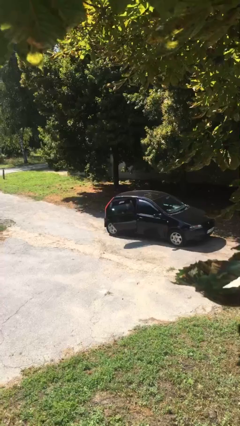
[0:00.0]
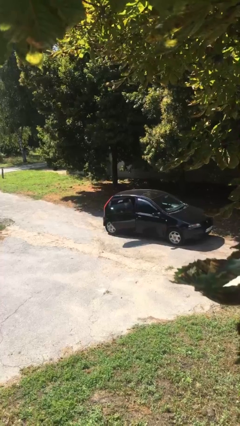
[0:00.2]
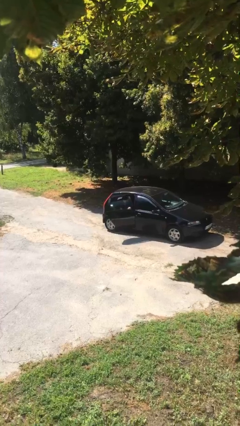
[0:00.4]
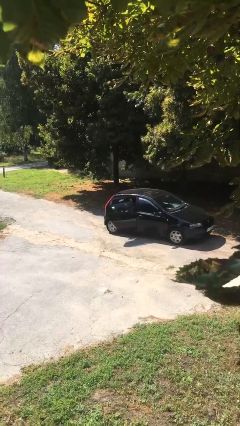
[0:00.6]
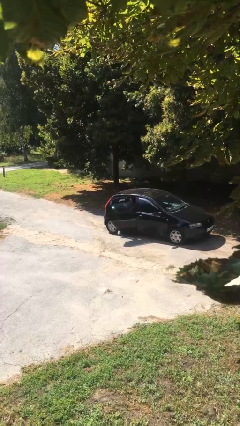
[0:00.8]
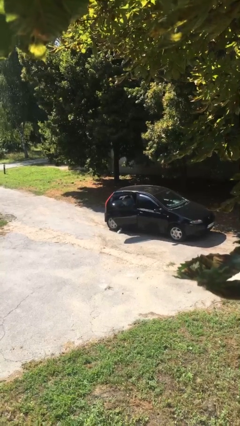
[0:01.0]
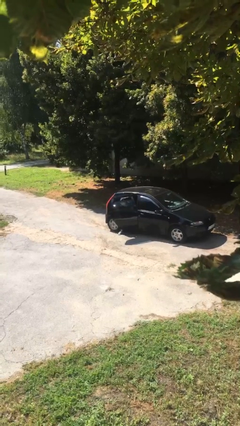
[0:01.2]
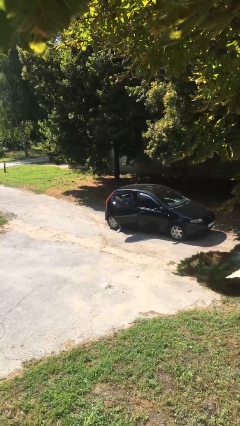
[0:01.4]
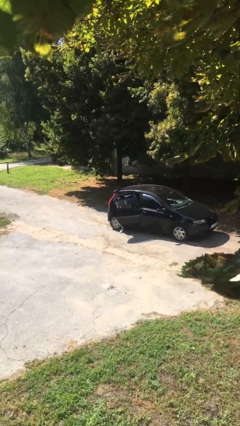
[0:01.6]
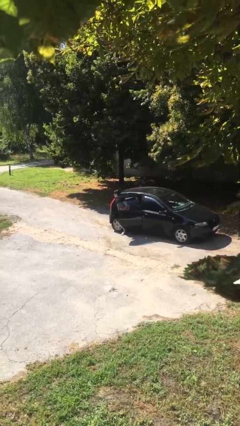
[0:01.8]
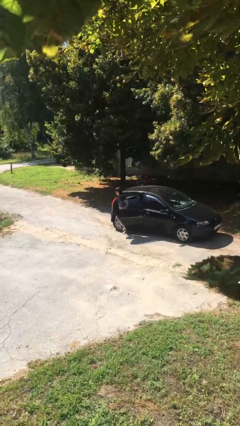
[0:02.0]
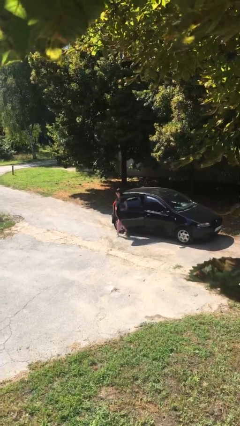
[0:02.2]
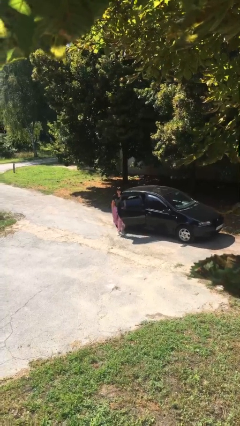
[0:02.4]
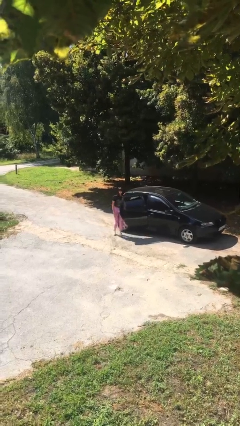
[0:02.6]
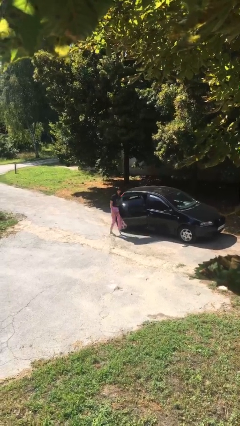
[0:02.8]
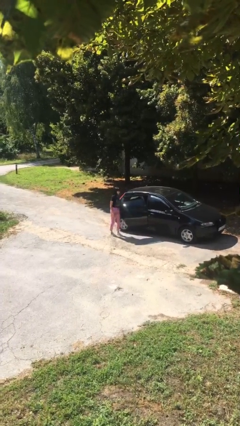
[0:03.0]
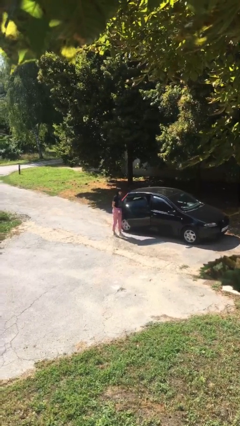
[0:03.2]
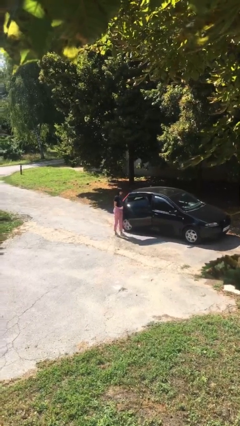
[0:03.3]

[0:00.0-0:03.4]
person exits car

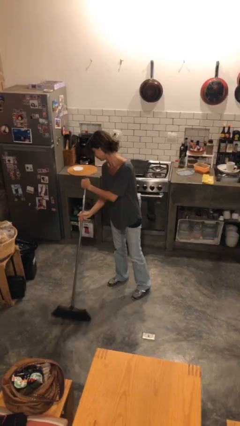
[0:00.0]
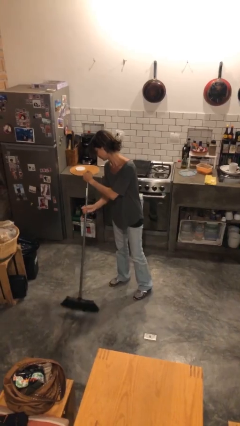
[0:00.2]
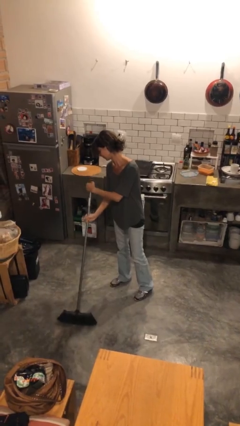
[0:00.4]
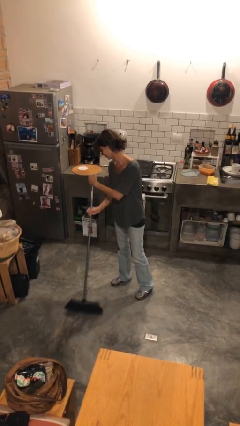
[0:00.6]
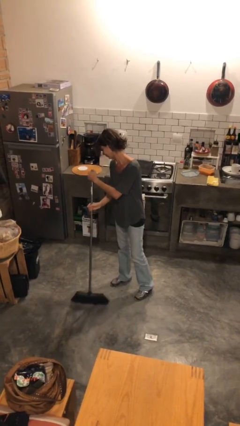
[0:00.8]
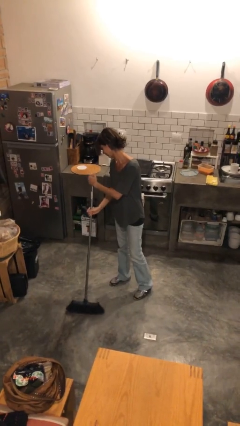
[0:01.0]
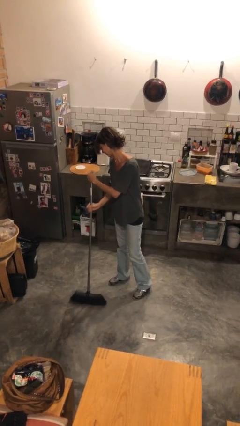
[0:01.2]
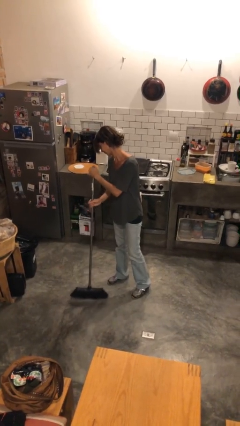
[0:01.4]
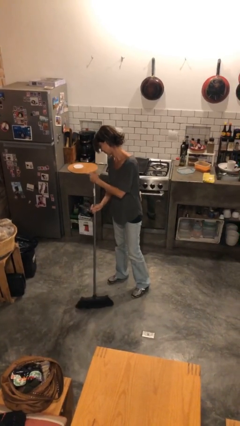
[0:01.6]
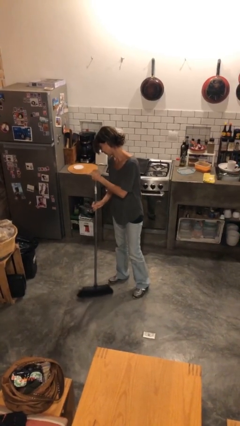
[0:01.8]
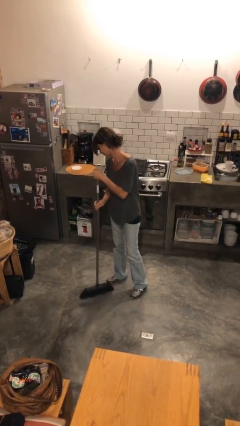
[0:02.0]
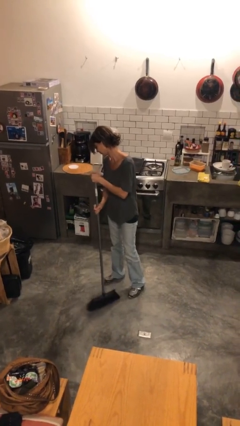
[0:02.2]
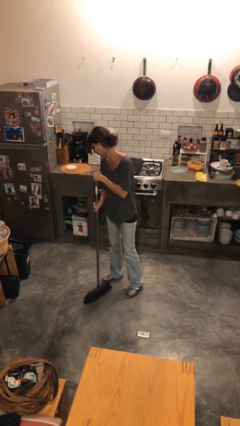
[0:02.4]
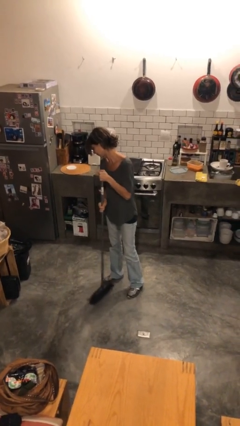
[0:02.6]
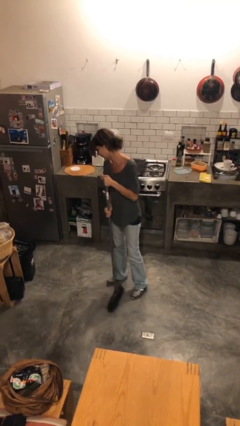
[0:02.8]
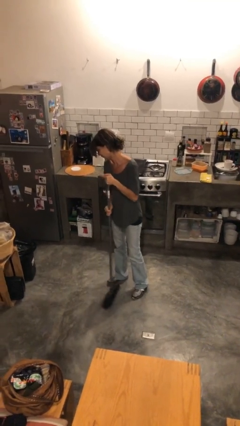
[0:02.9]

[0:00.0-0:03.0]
person sweeps floor

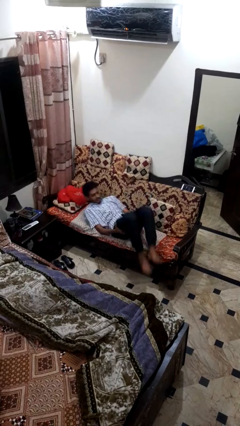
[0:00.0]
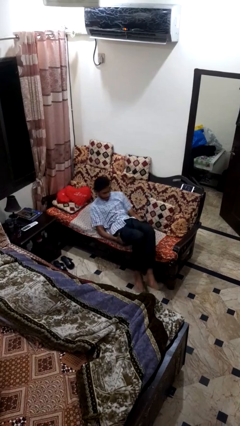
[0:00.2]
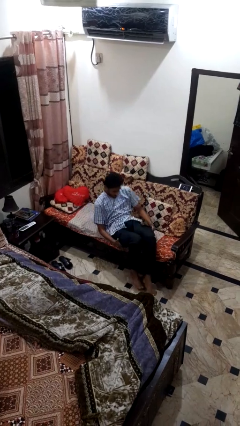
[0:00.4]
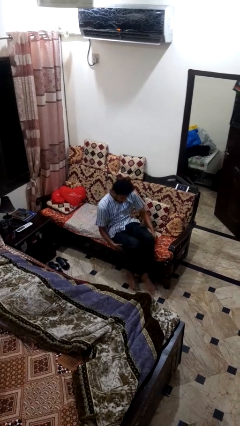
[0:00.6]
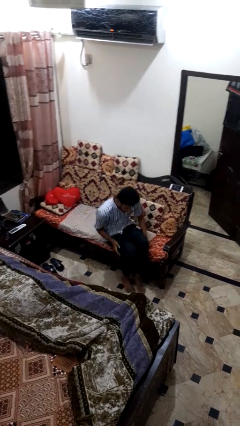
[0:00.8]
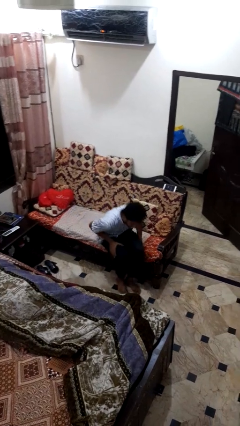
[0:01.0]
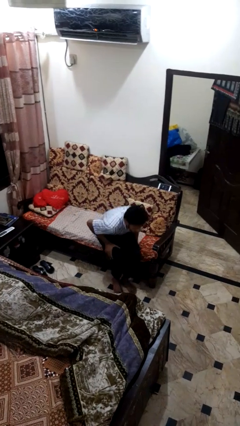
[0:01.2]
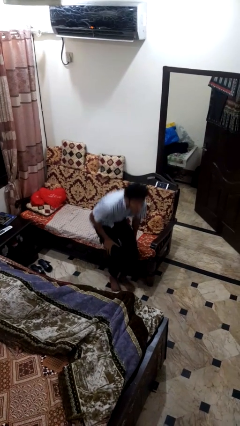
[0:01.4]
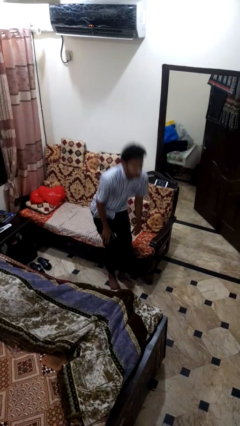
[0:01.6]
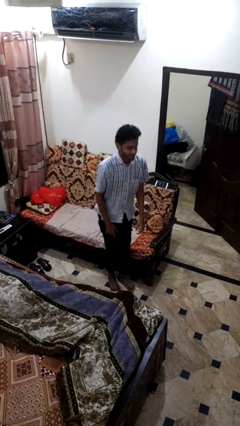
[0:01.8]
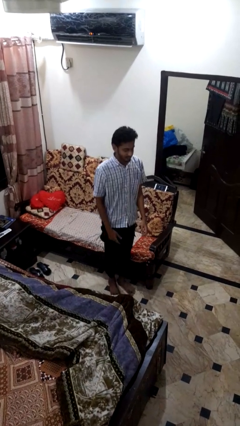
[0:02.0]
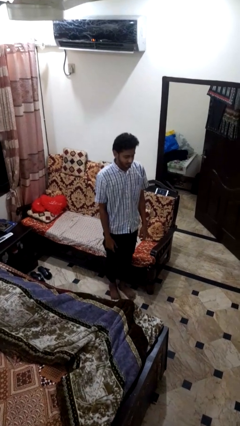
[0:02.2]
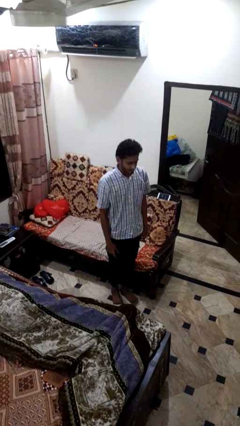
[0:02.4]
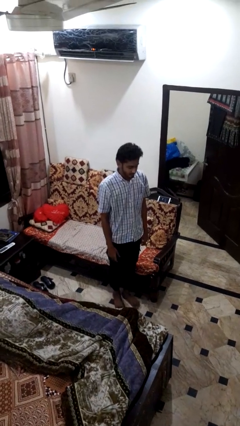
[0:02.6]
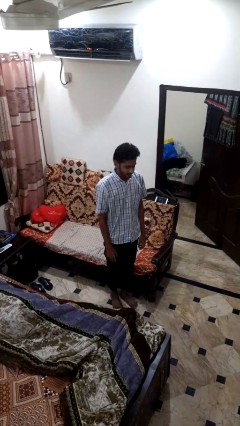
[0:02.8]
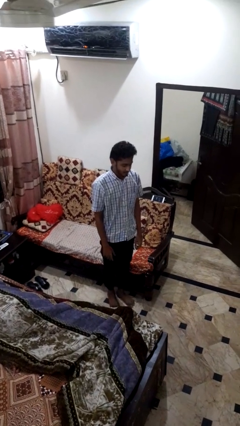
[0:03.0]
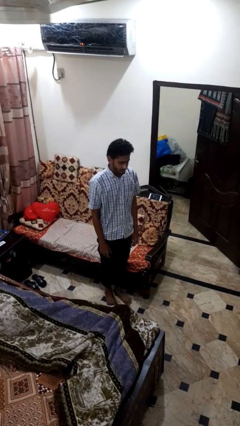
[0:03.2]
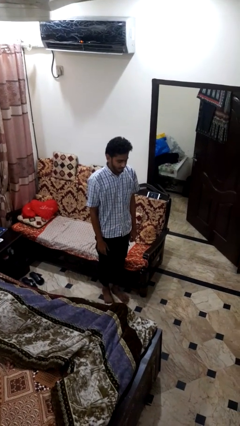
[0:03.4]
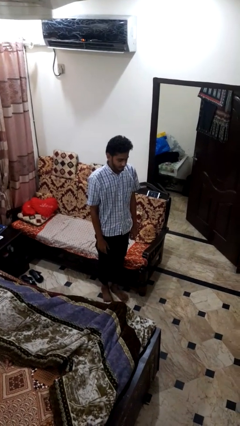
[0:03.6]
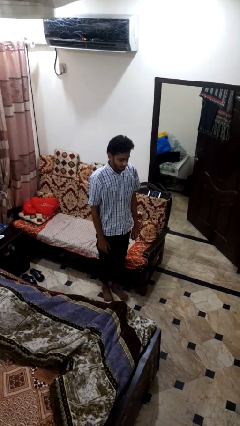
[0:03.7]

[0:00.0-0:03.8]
person stands up

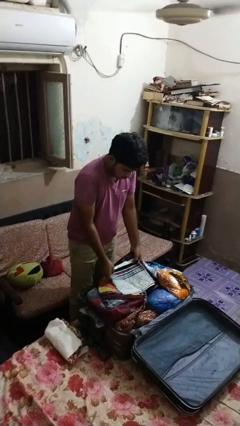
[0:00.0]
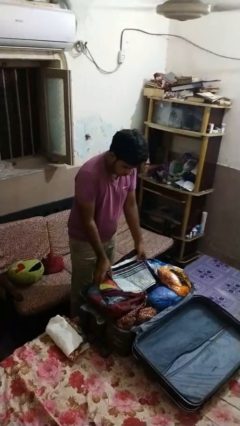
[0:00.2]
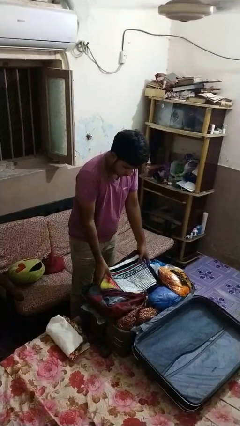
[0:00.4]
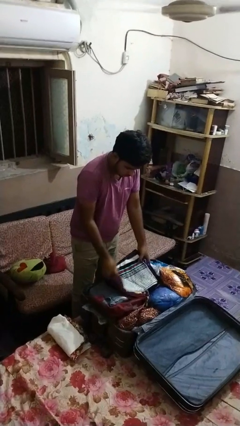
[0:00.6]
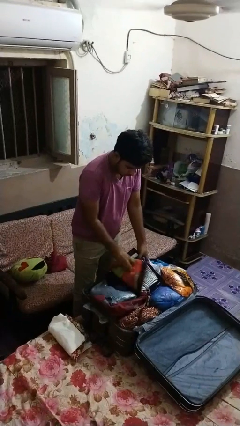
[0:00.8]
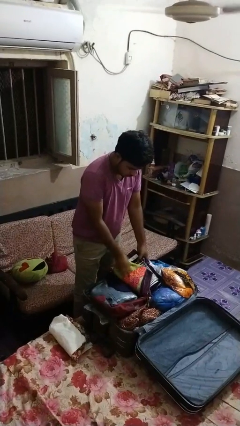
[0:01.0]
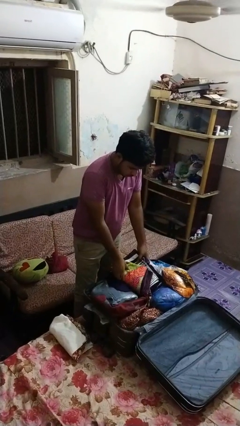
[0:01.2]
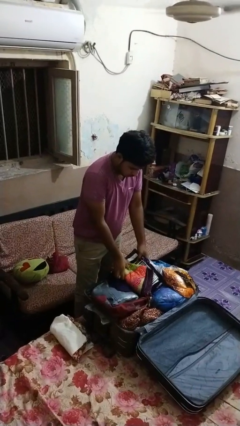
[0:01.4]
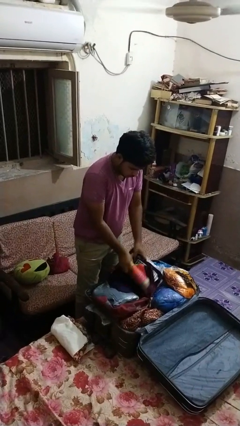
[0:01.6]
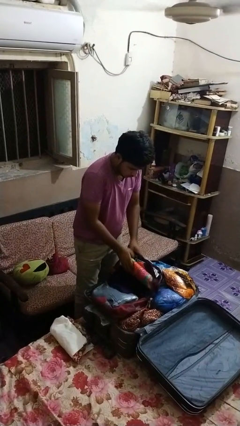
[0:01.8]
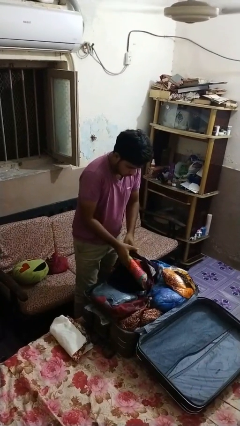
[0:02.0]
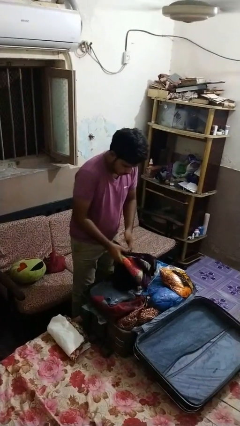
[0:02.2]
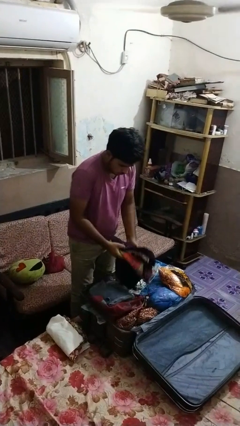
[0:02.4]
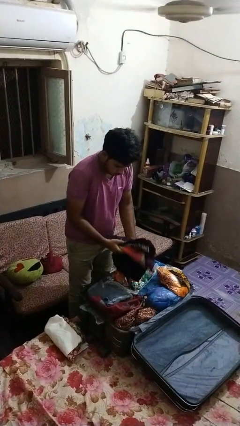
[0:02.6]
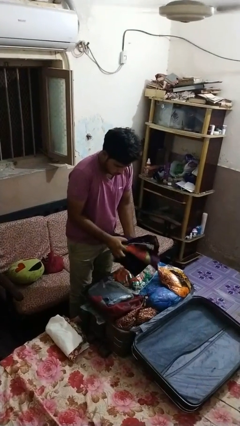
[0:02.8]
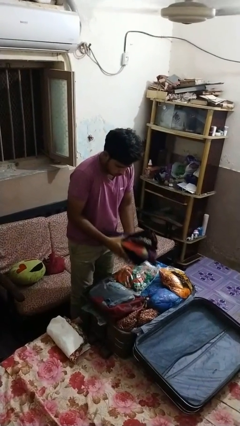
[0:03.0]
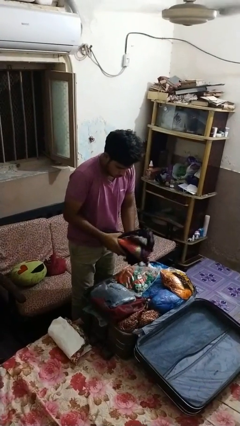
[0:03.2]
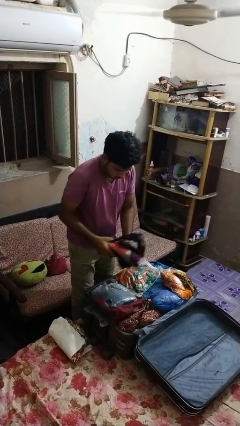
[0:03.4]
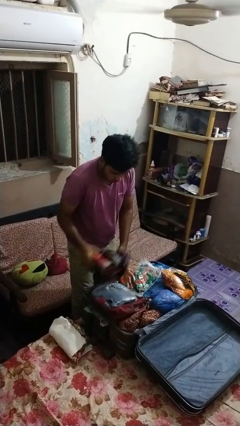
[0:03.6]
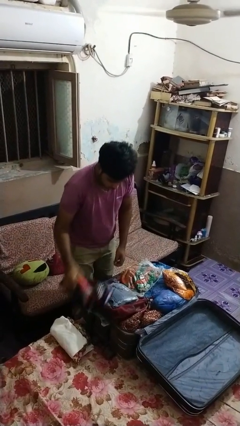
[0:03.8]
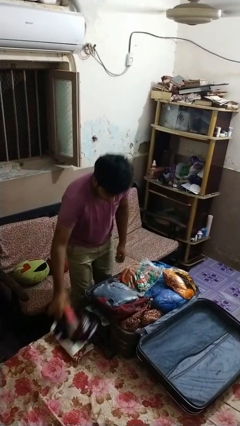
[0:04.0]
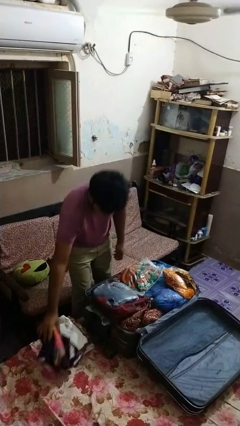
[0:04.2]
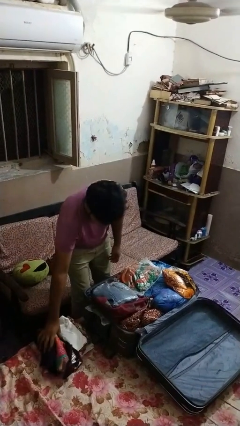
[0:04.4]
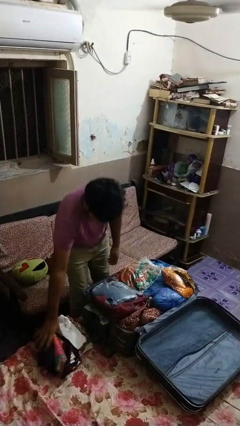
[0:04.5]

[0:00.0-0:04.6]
person unloads clothes from suitcase

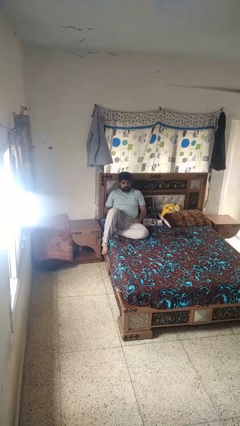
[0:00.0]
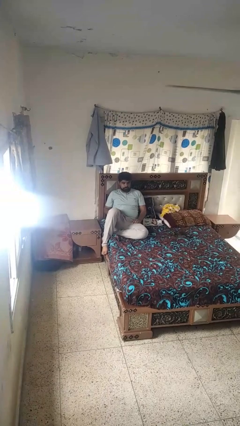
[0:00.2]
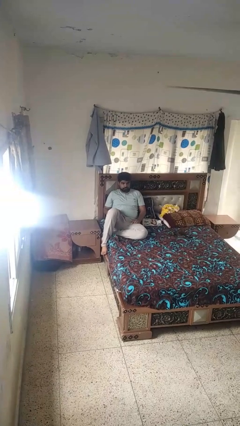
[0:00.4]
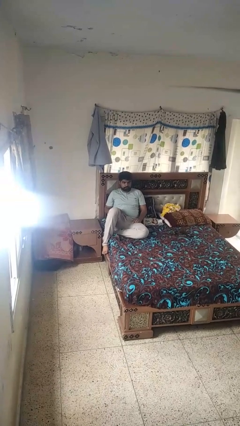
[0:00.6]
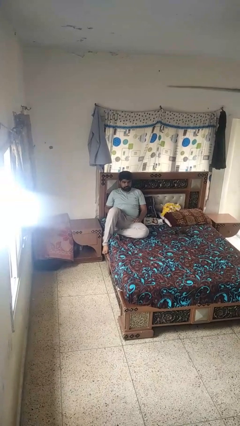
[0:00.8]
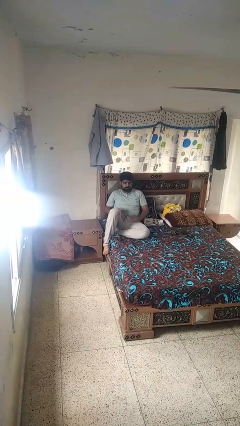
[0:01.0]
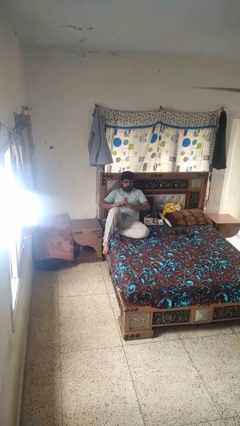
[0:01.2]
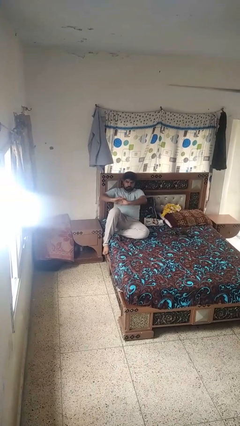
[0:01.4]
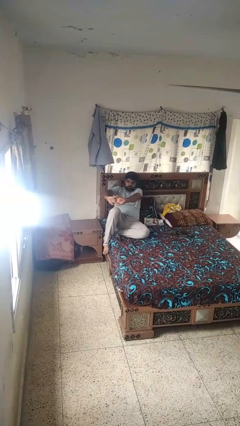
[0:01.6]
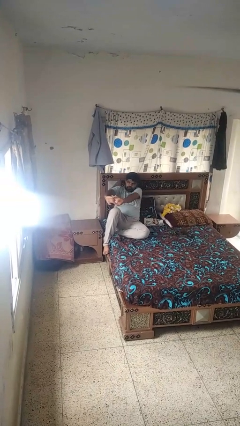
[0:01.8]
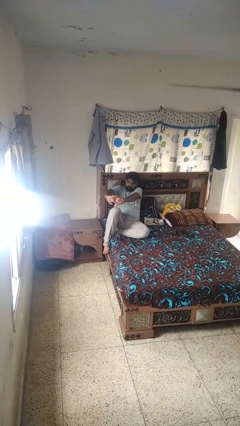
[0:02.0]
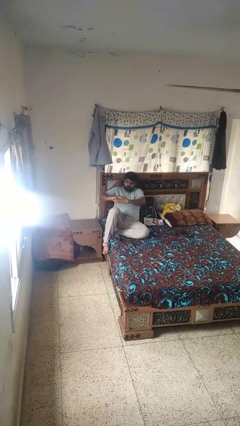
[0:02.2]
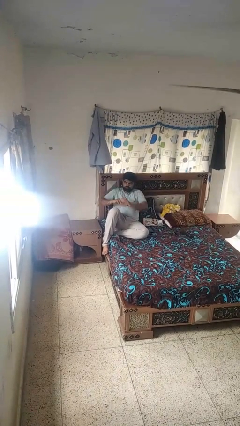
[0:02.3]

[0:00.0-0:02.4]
person cracks knuckles
